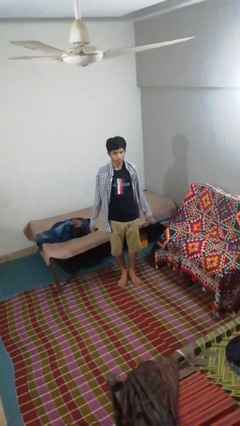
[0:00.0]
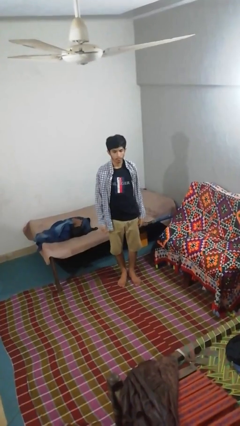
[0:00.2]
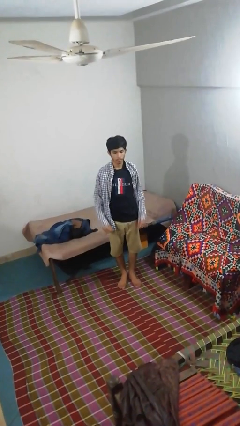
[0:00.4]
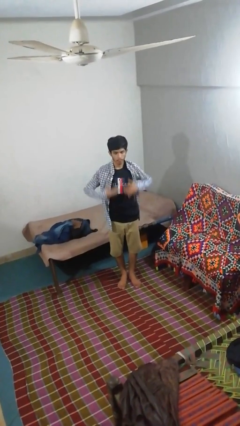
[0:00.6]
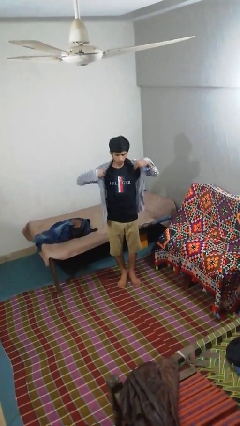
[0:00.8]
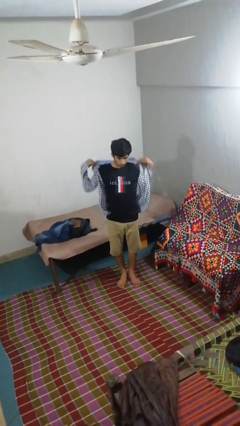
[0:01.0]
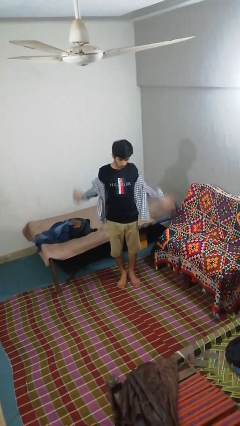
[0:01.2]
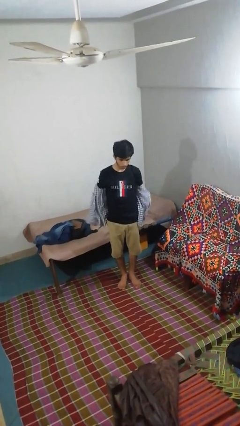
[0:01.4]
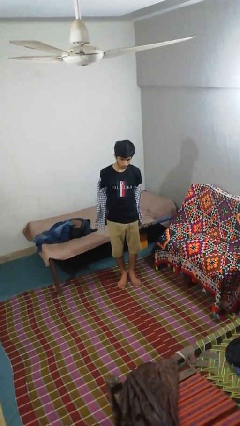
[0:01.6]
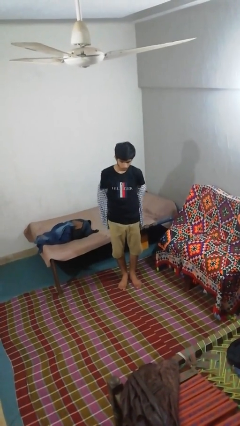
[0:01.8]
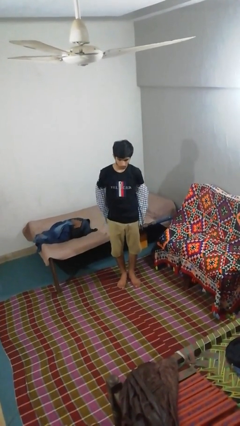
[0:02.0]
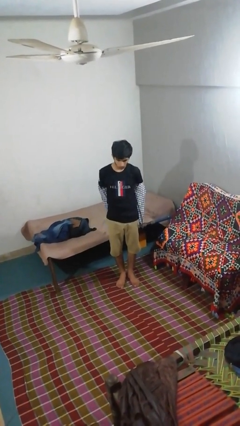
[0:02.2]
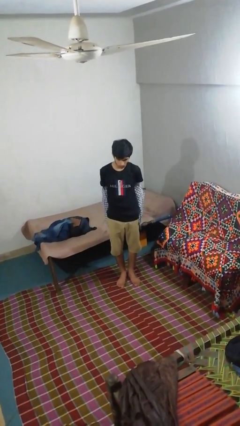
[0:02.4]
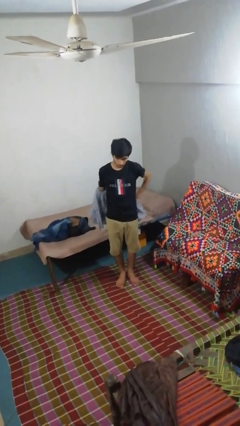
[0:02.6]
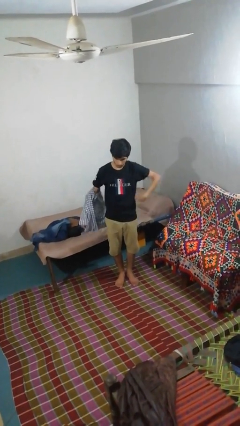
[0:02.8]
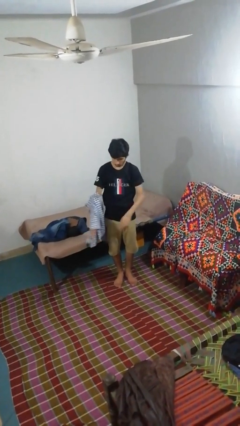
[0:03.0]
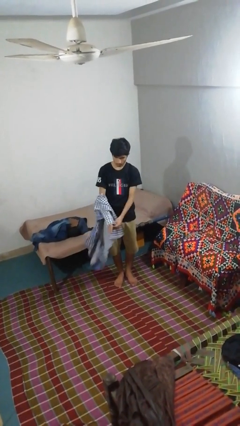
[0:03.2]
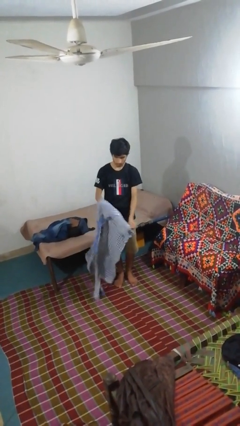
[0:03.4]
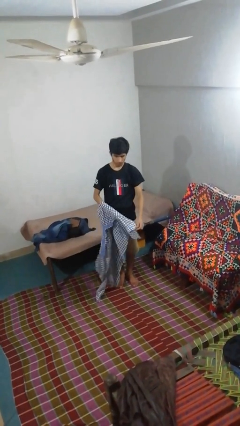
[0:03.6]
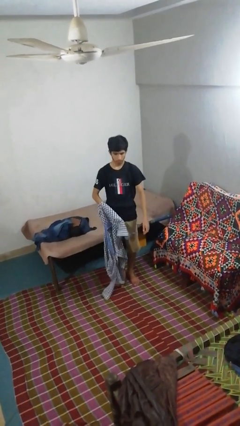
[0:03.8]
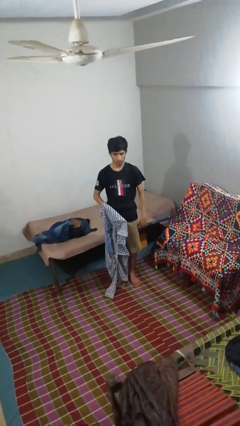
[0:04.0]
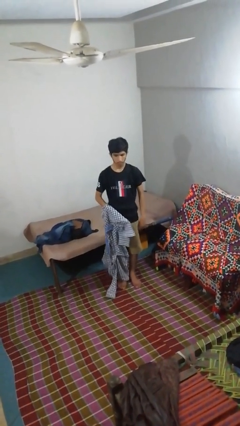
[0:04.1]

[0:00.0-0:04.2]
person takes off shirt

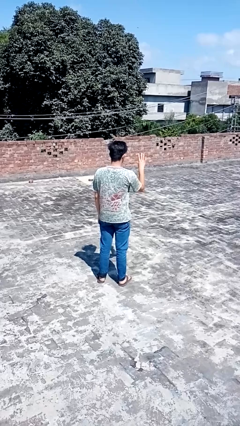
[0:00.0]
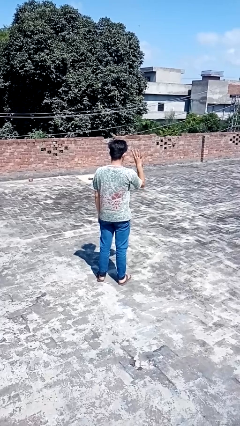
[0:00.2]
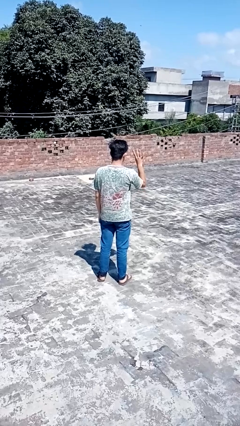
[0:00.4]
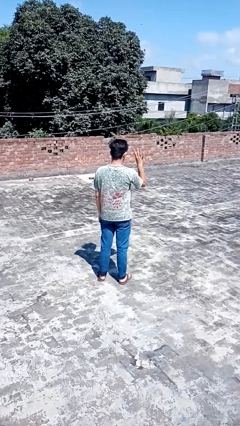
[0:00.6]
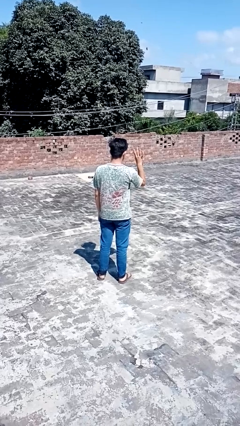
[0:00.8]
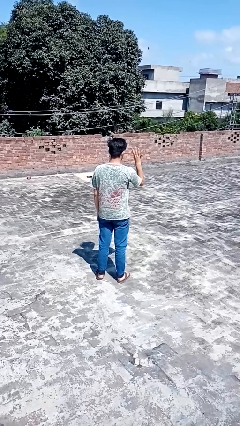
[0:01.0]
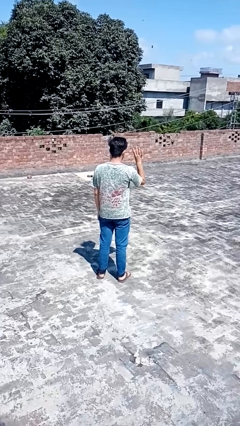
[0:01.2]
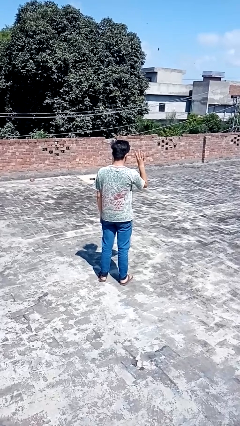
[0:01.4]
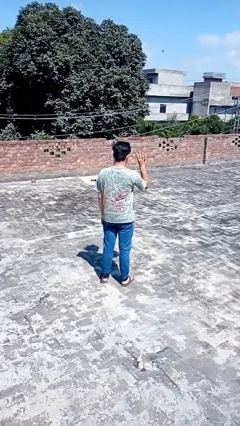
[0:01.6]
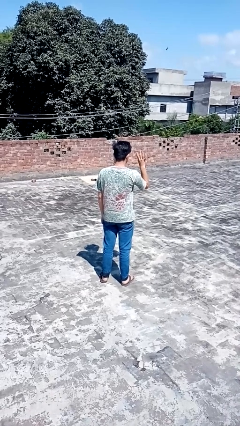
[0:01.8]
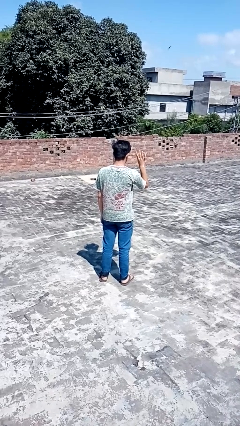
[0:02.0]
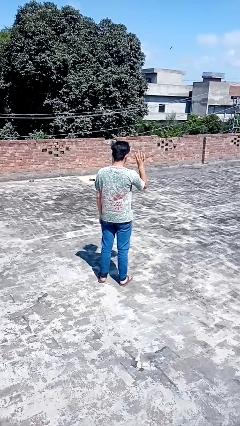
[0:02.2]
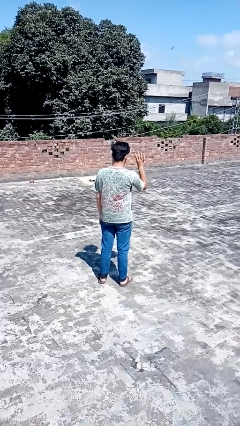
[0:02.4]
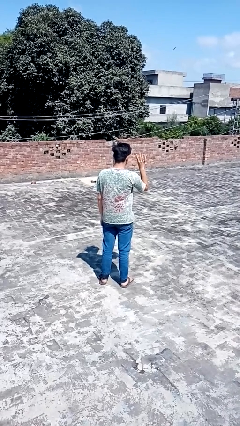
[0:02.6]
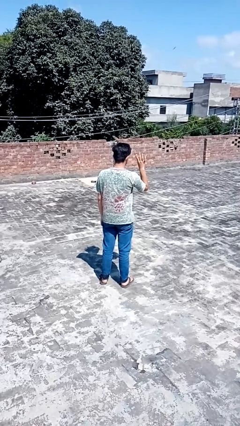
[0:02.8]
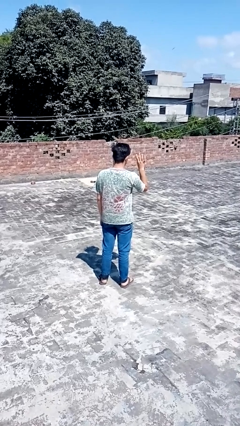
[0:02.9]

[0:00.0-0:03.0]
person gestures number four

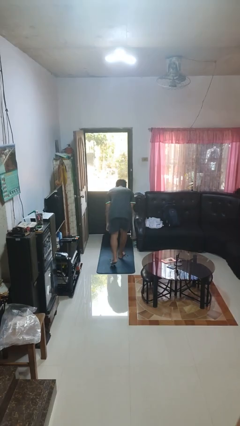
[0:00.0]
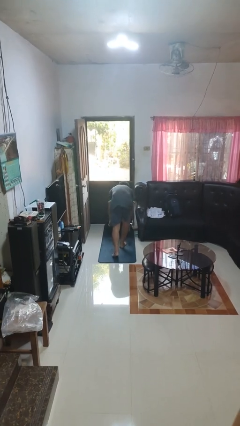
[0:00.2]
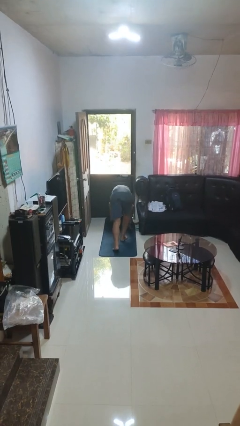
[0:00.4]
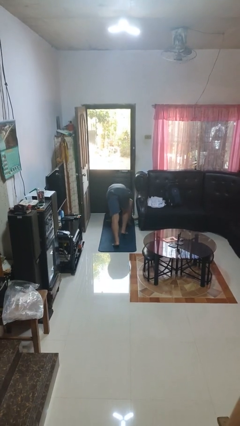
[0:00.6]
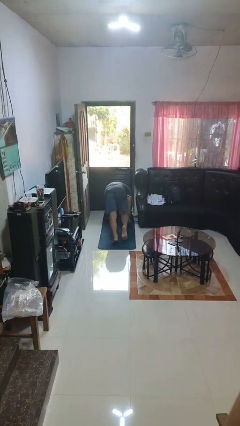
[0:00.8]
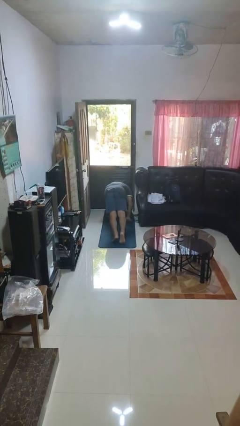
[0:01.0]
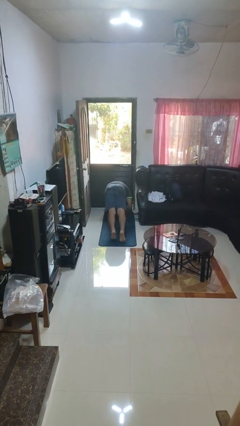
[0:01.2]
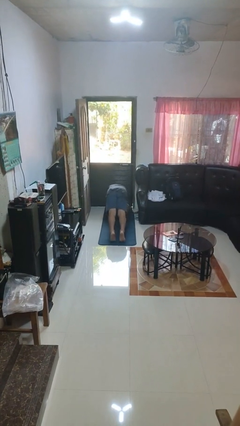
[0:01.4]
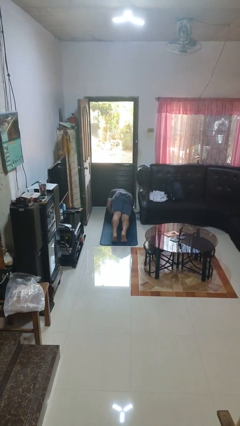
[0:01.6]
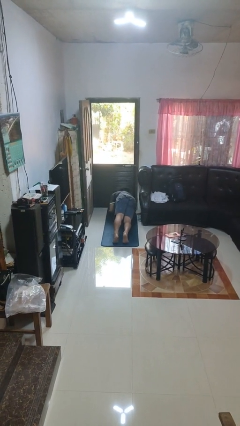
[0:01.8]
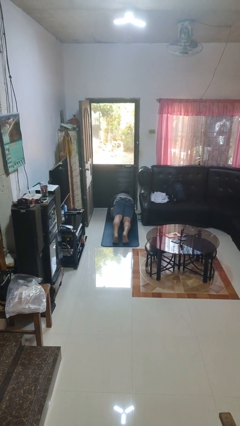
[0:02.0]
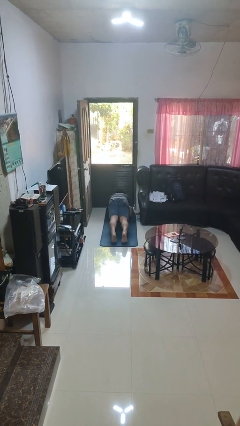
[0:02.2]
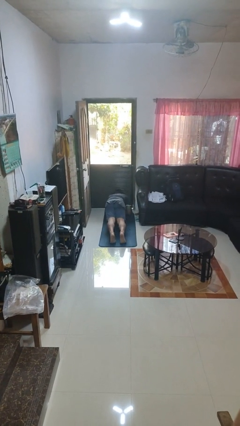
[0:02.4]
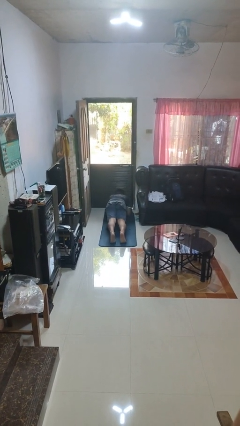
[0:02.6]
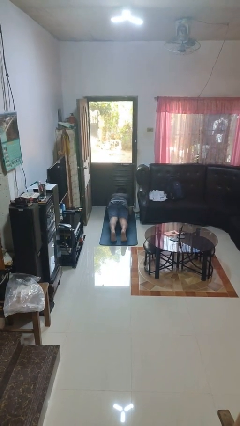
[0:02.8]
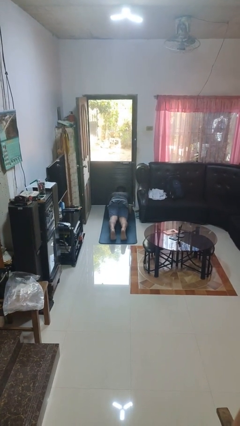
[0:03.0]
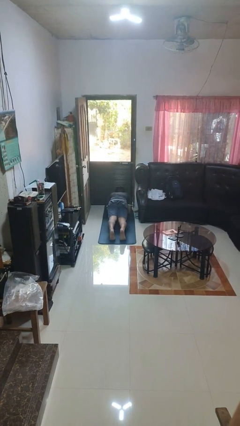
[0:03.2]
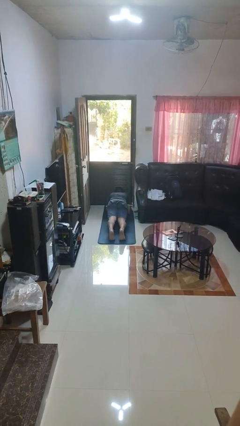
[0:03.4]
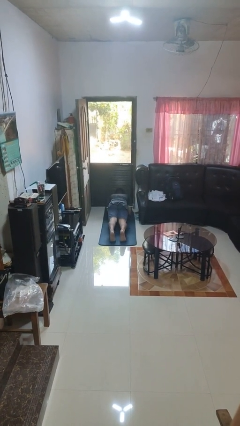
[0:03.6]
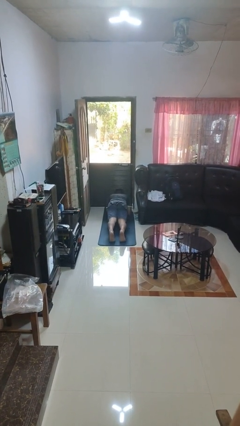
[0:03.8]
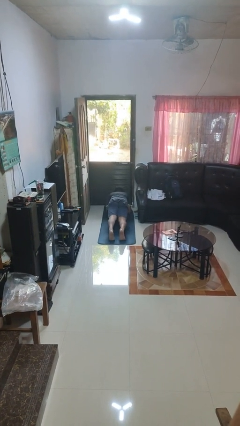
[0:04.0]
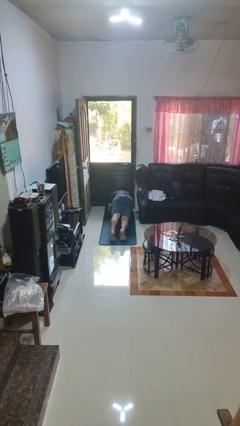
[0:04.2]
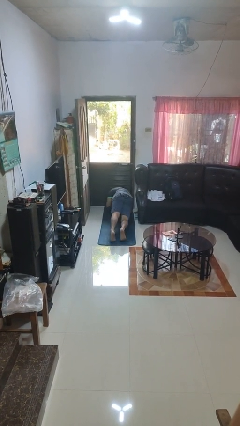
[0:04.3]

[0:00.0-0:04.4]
person exercises with plank

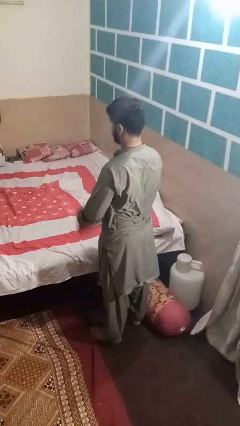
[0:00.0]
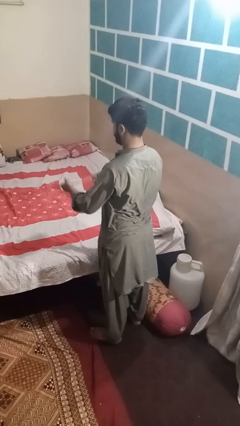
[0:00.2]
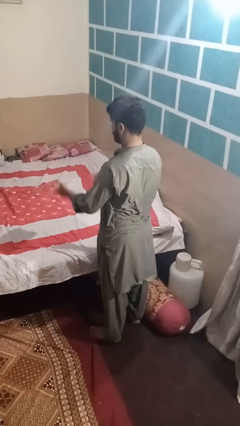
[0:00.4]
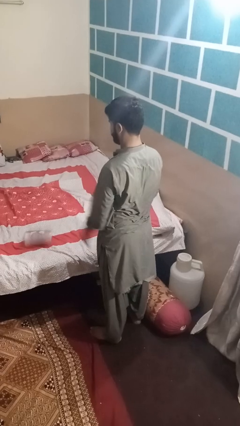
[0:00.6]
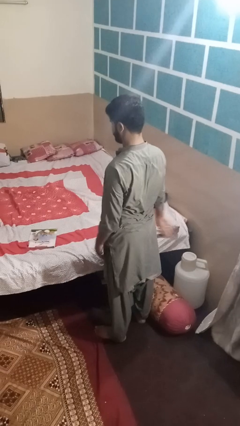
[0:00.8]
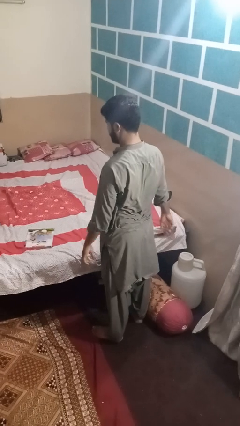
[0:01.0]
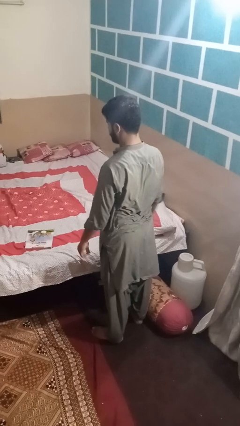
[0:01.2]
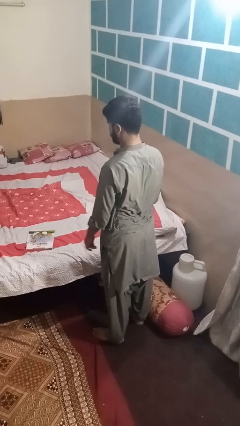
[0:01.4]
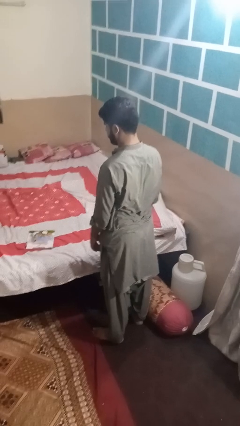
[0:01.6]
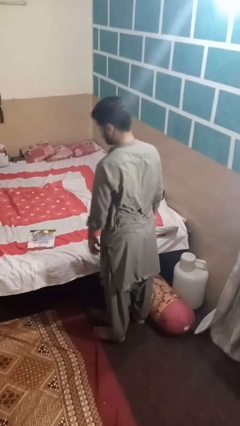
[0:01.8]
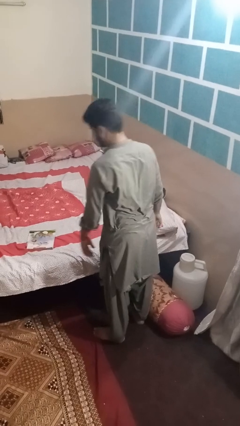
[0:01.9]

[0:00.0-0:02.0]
person throws object on bed

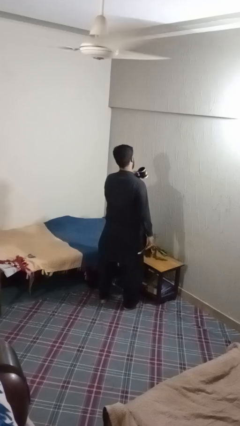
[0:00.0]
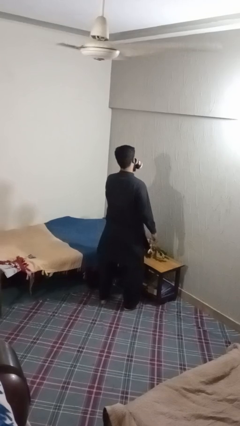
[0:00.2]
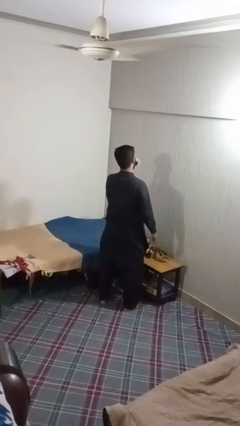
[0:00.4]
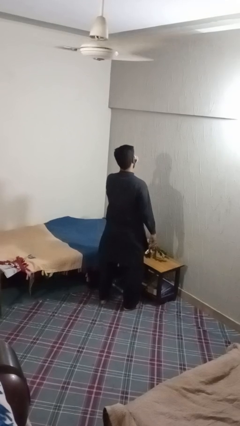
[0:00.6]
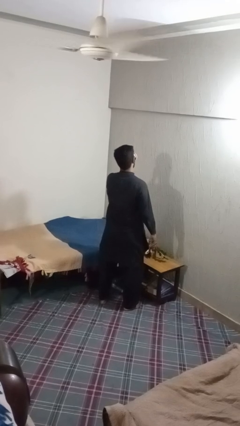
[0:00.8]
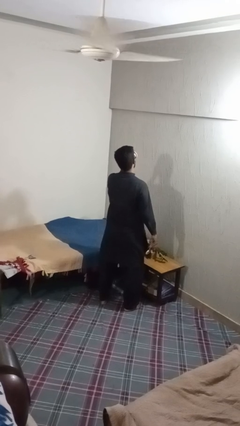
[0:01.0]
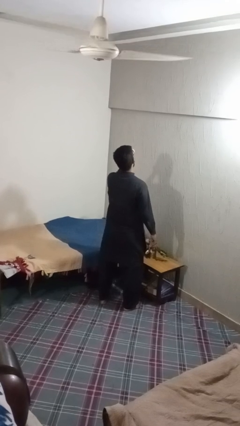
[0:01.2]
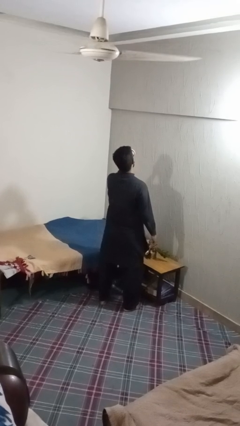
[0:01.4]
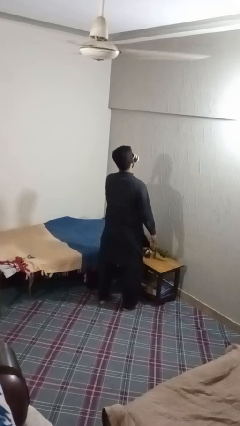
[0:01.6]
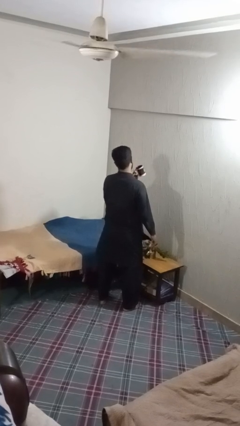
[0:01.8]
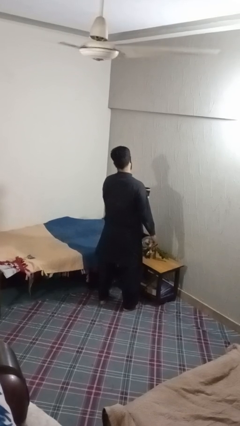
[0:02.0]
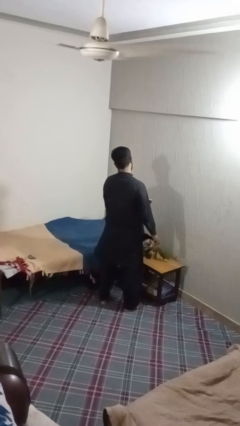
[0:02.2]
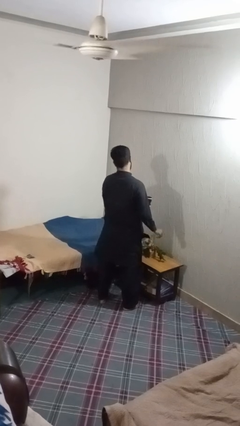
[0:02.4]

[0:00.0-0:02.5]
person drinks from mug

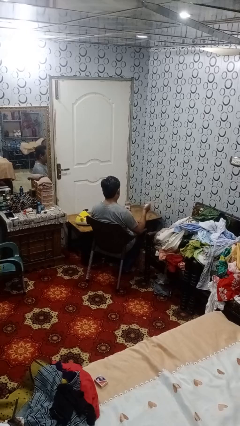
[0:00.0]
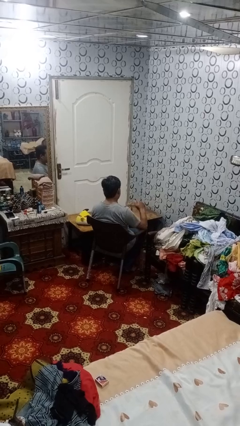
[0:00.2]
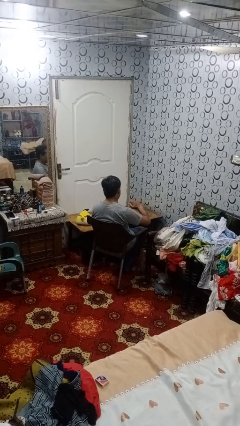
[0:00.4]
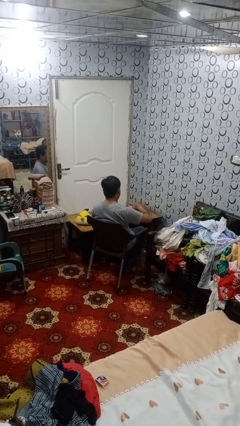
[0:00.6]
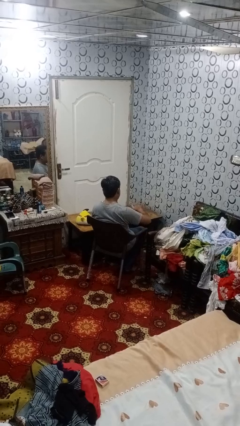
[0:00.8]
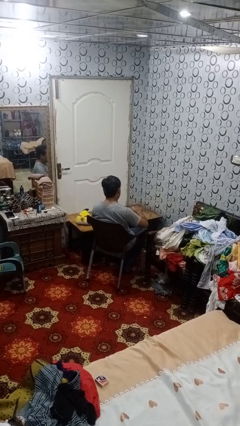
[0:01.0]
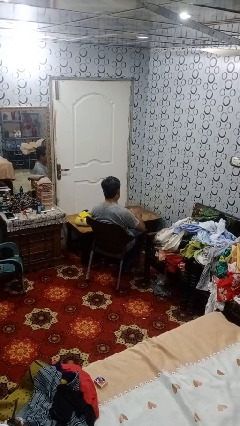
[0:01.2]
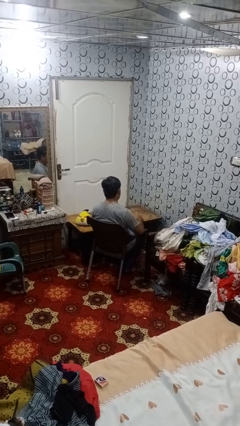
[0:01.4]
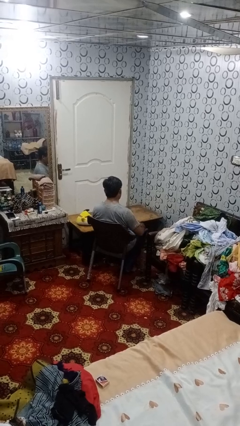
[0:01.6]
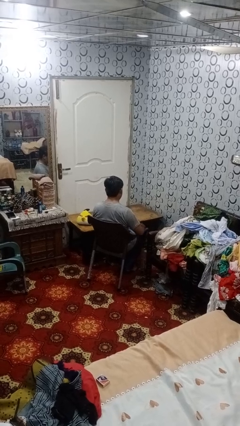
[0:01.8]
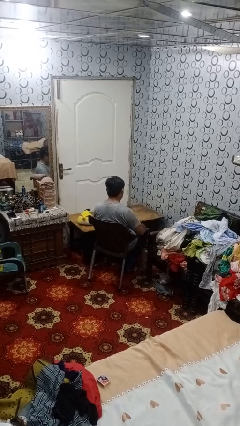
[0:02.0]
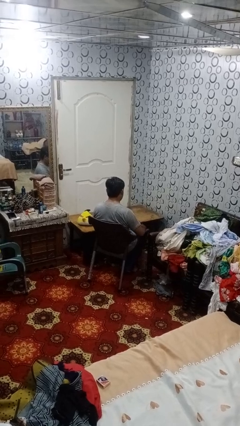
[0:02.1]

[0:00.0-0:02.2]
person closes jar
